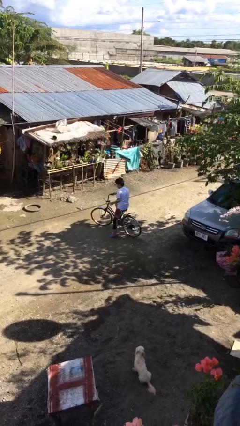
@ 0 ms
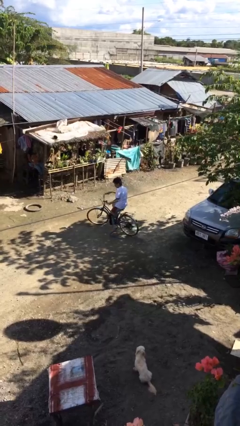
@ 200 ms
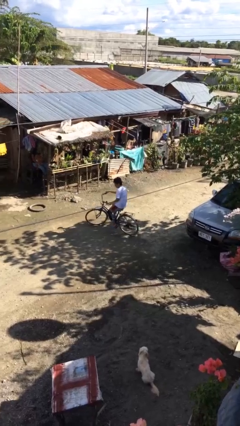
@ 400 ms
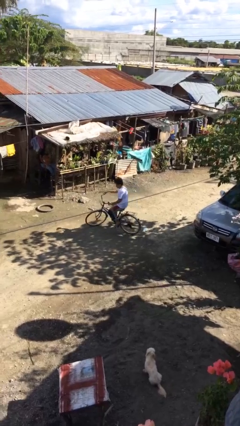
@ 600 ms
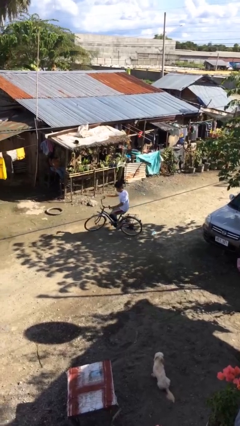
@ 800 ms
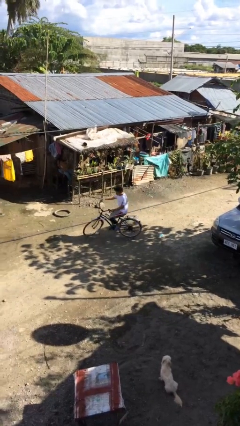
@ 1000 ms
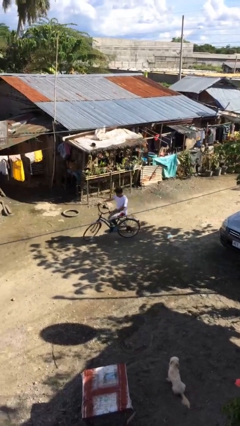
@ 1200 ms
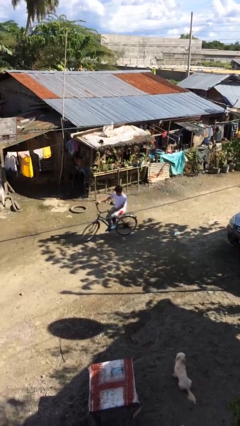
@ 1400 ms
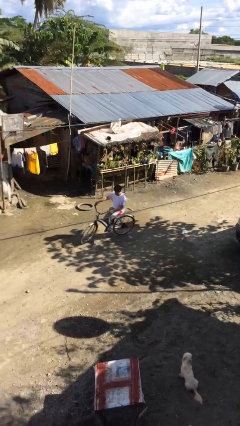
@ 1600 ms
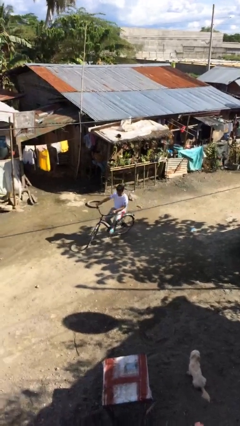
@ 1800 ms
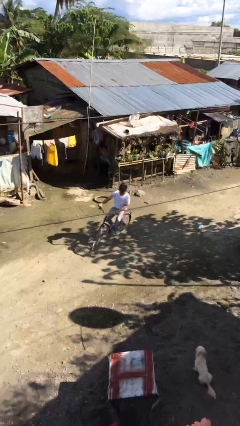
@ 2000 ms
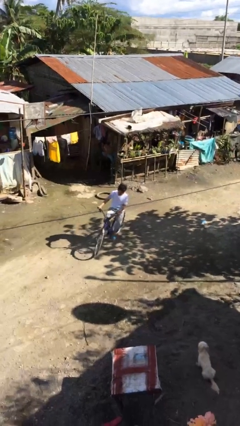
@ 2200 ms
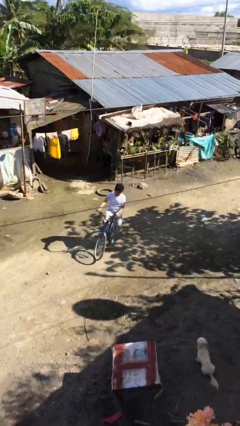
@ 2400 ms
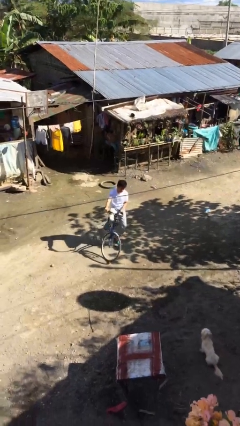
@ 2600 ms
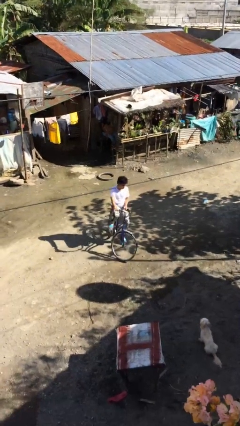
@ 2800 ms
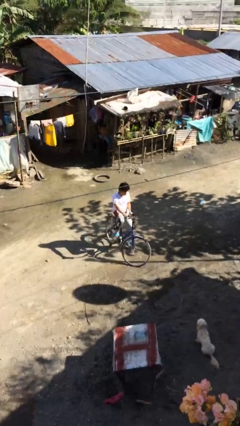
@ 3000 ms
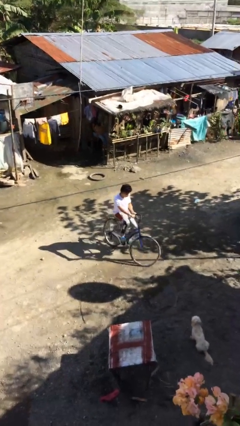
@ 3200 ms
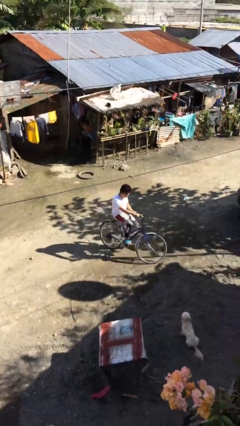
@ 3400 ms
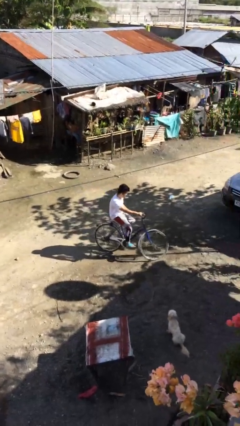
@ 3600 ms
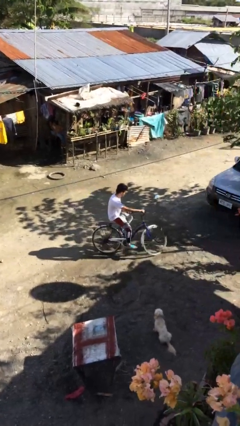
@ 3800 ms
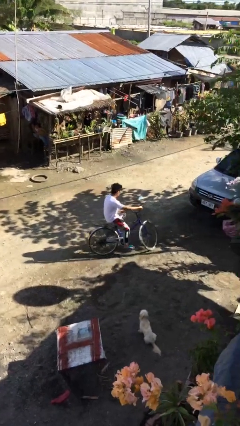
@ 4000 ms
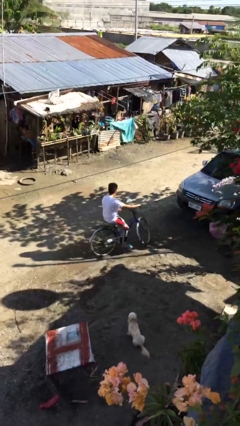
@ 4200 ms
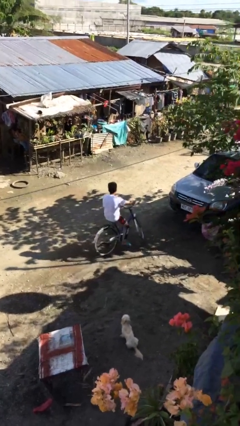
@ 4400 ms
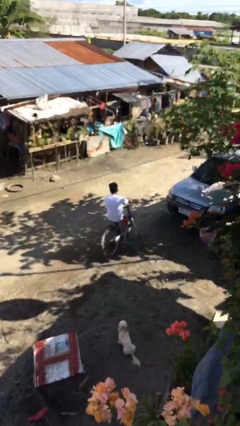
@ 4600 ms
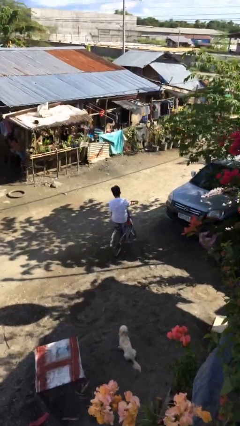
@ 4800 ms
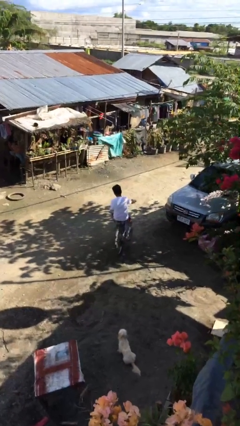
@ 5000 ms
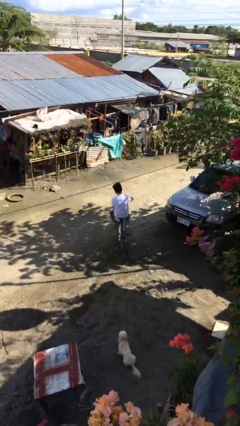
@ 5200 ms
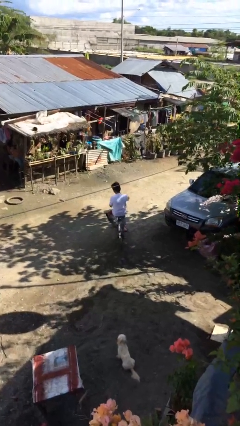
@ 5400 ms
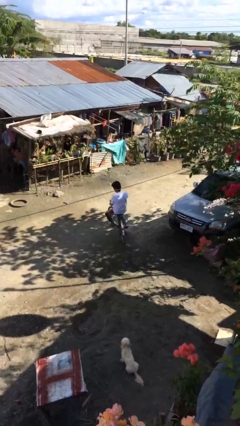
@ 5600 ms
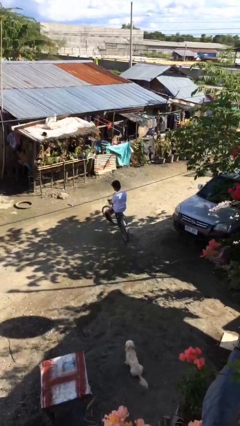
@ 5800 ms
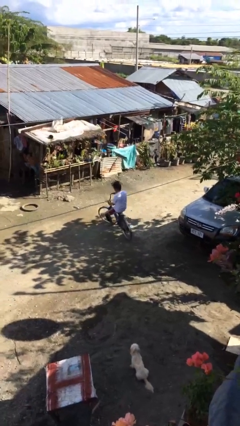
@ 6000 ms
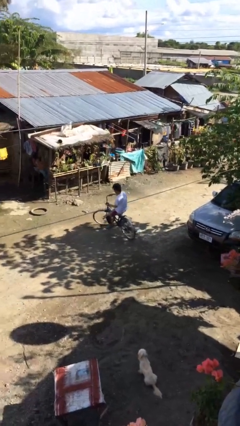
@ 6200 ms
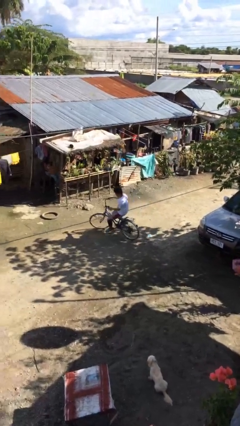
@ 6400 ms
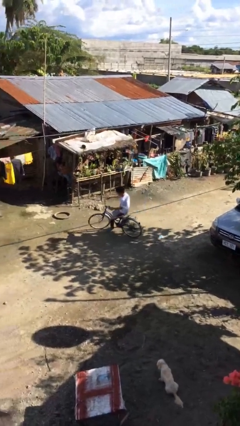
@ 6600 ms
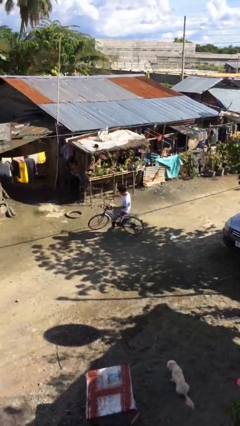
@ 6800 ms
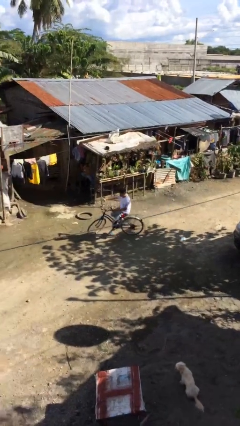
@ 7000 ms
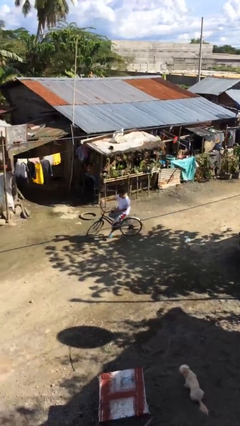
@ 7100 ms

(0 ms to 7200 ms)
person rides bicycle

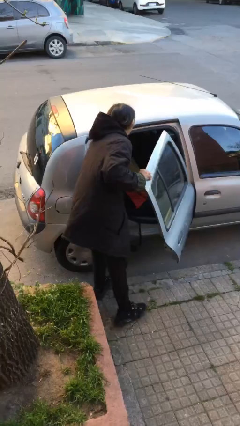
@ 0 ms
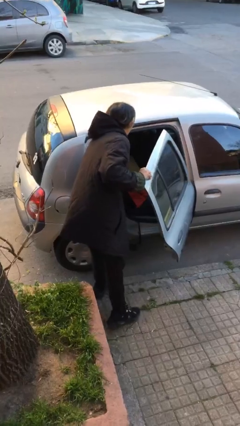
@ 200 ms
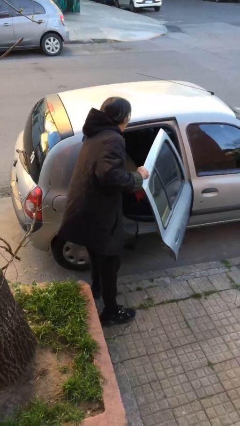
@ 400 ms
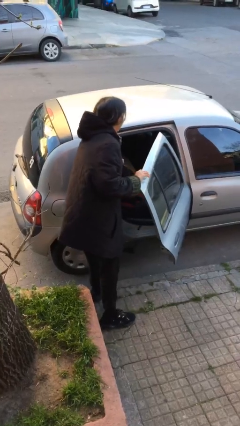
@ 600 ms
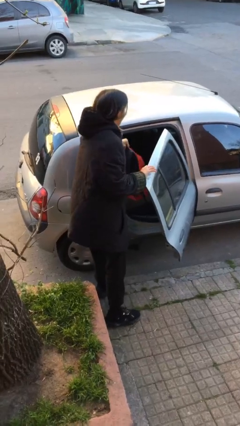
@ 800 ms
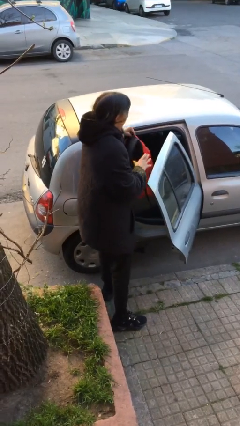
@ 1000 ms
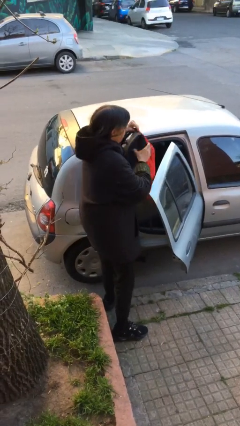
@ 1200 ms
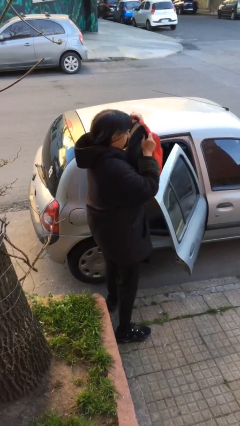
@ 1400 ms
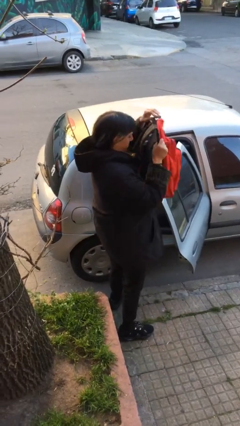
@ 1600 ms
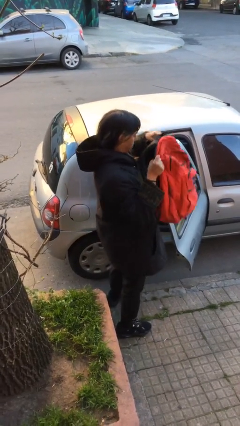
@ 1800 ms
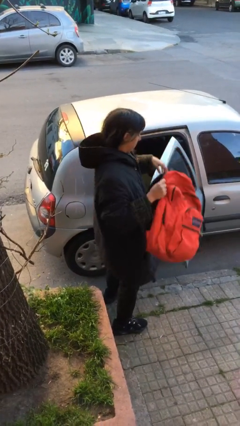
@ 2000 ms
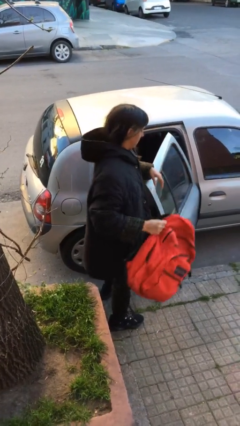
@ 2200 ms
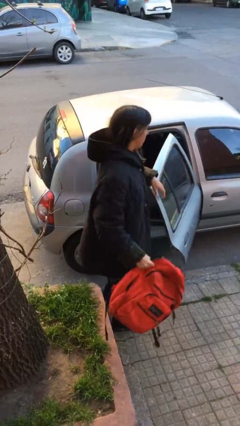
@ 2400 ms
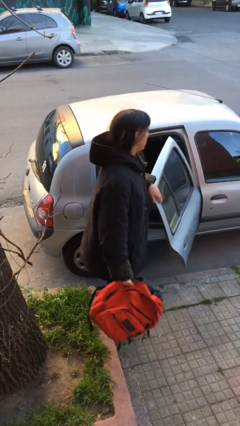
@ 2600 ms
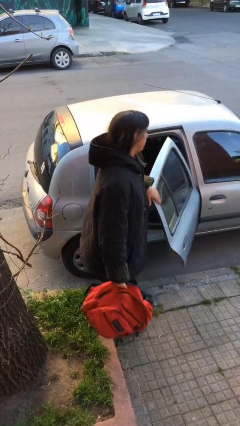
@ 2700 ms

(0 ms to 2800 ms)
person unloads car

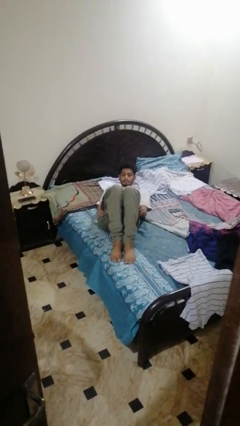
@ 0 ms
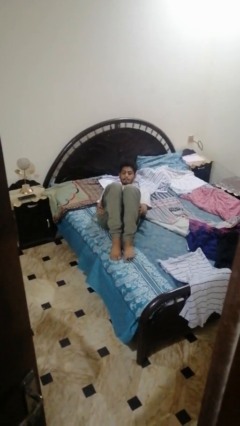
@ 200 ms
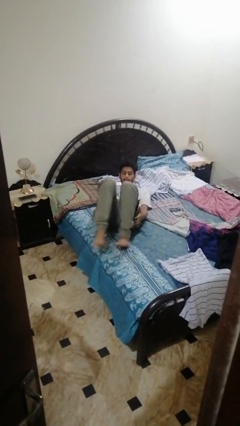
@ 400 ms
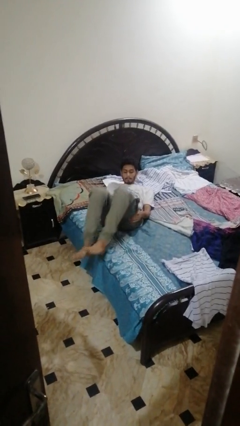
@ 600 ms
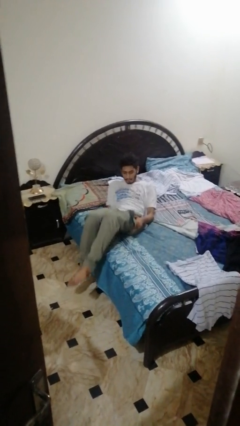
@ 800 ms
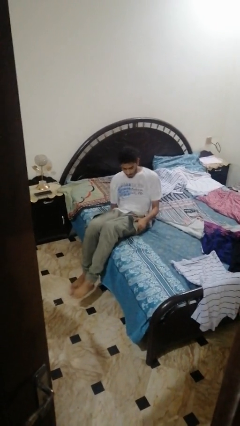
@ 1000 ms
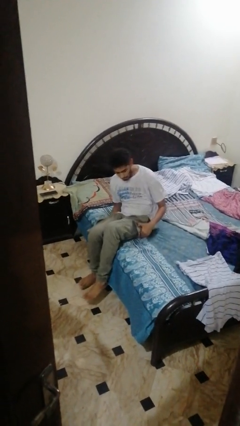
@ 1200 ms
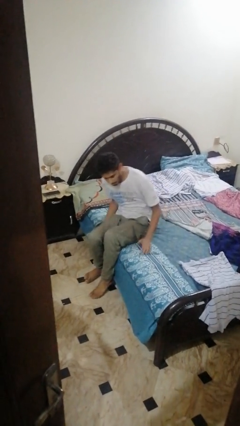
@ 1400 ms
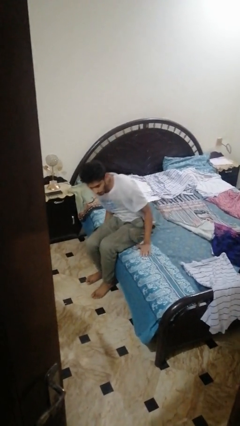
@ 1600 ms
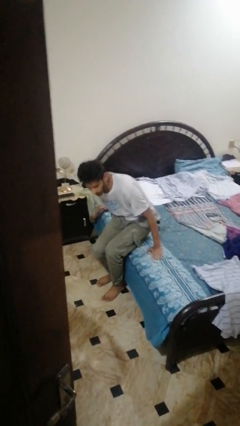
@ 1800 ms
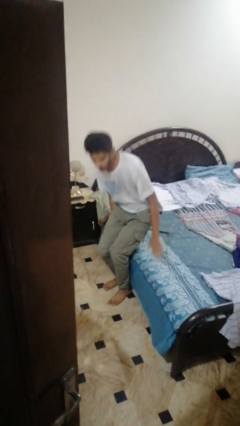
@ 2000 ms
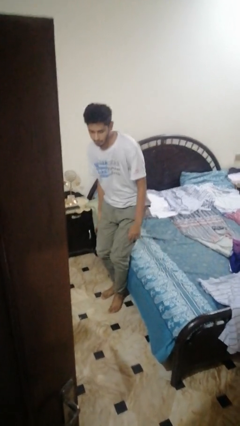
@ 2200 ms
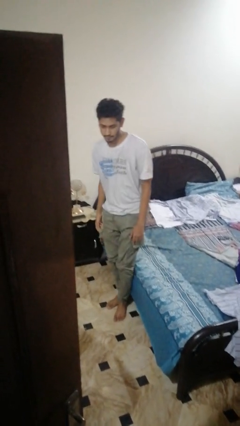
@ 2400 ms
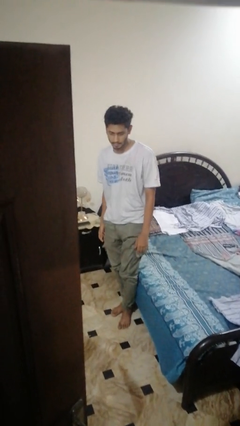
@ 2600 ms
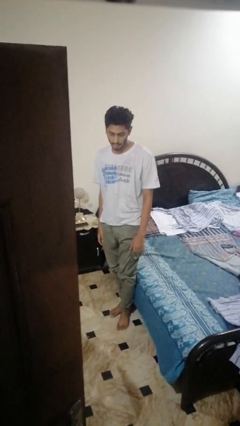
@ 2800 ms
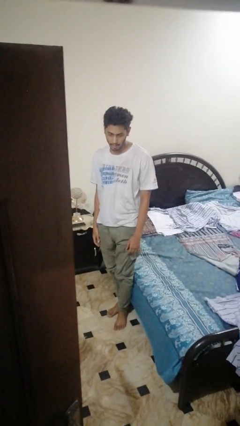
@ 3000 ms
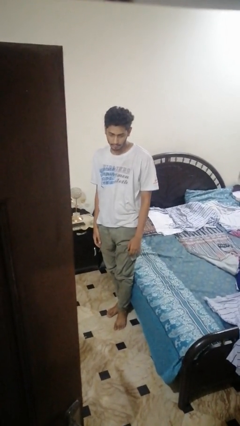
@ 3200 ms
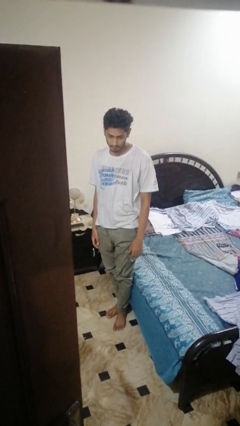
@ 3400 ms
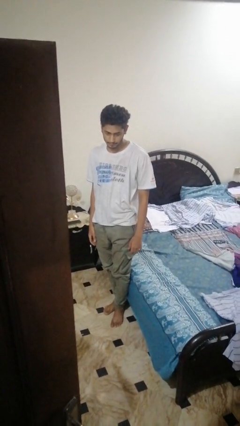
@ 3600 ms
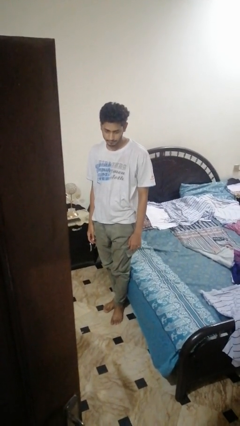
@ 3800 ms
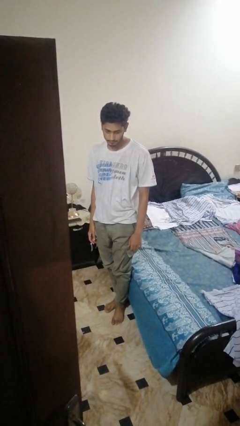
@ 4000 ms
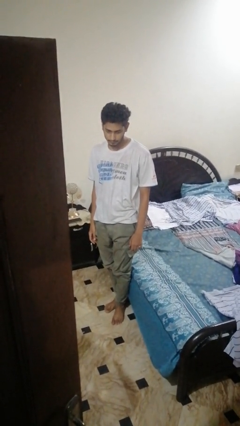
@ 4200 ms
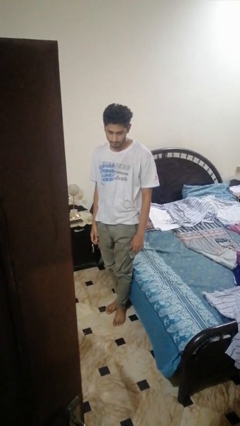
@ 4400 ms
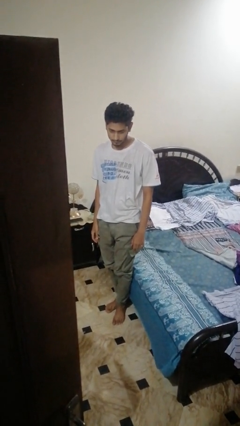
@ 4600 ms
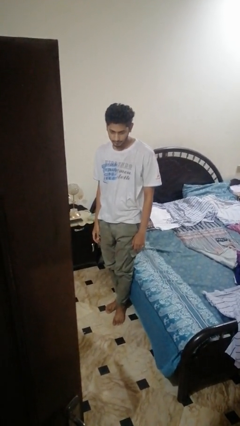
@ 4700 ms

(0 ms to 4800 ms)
person stands up

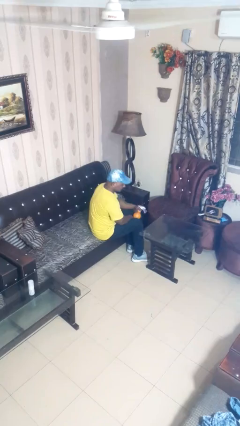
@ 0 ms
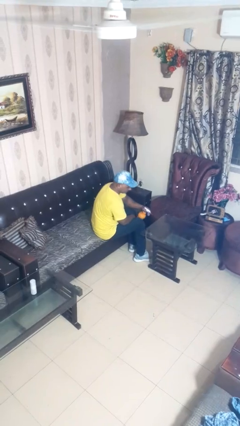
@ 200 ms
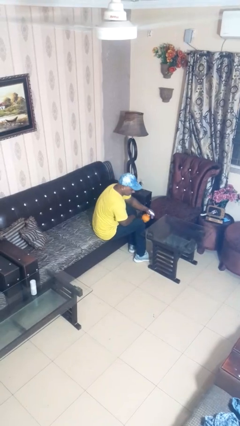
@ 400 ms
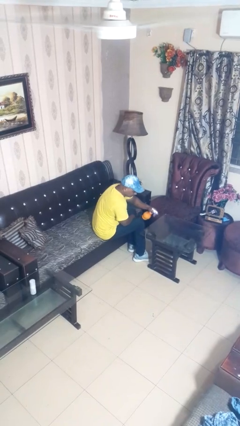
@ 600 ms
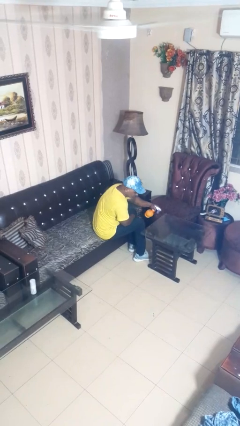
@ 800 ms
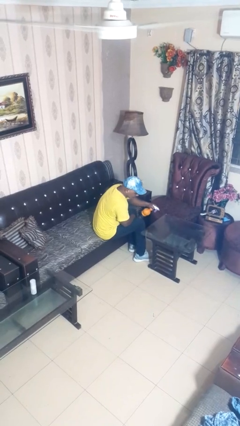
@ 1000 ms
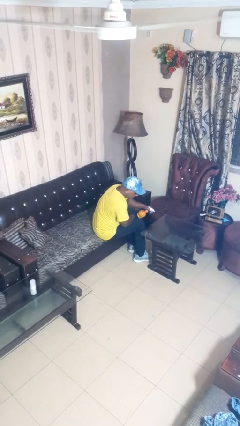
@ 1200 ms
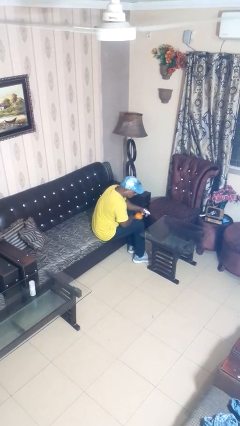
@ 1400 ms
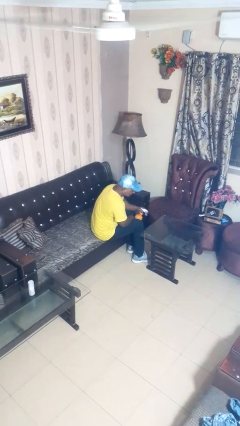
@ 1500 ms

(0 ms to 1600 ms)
person sprays from bottle

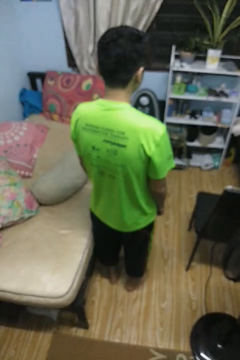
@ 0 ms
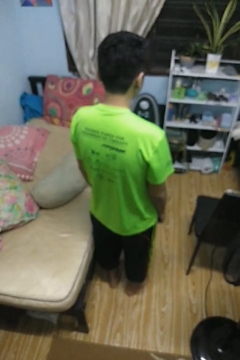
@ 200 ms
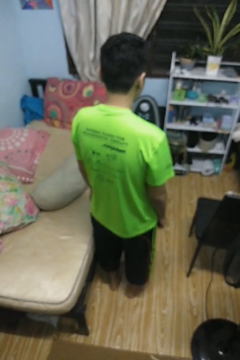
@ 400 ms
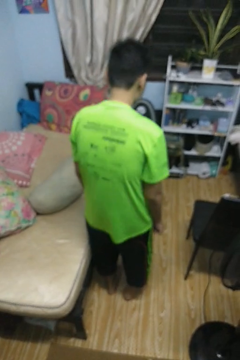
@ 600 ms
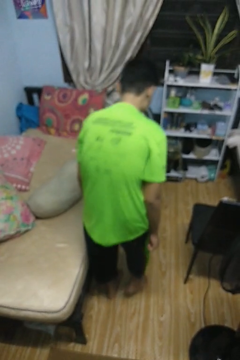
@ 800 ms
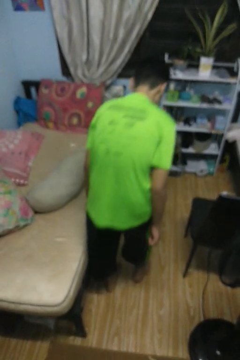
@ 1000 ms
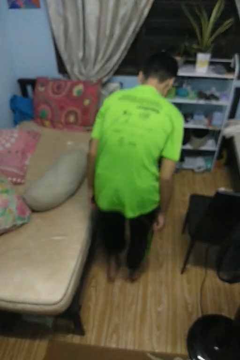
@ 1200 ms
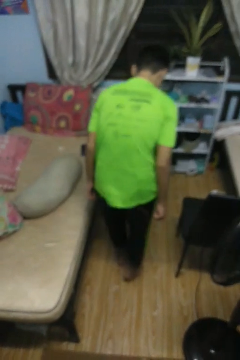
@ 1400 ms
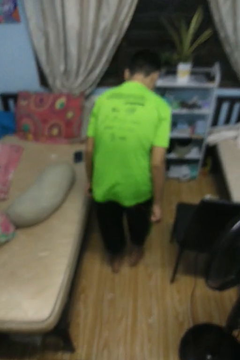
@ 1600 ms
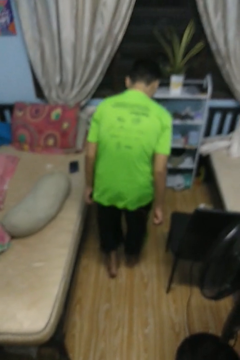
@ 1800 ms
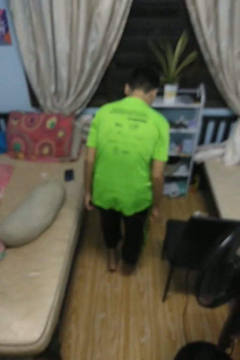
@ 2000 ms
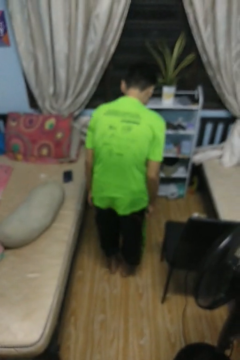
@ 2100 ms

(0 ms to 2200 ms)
person walks tiptoe
